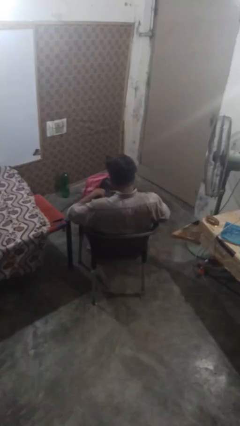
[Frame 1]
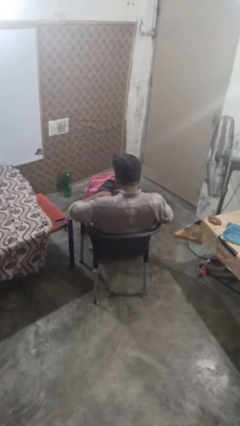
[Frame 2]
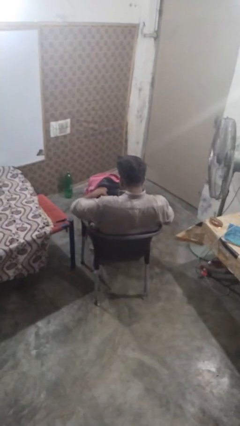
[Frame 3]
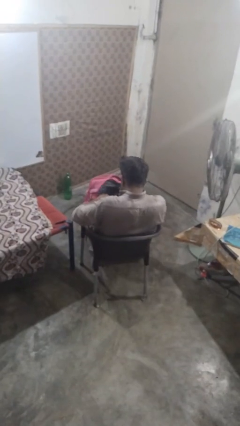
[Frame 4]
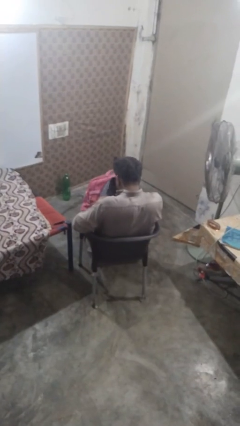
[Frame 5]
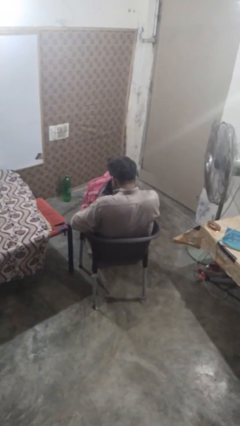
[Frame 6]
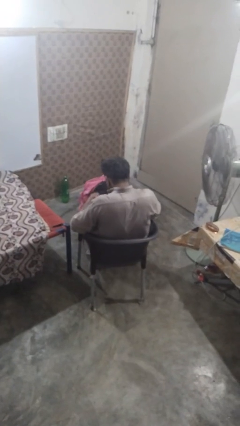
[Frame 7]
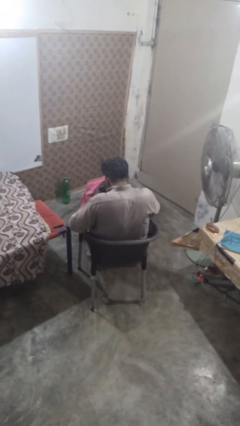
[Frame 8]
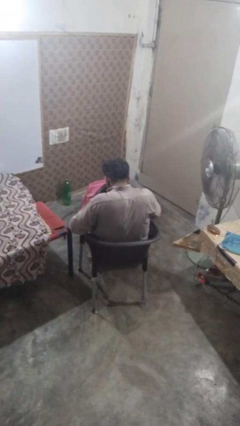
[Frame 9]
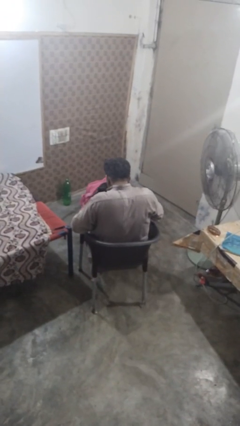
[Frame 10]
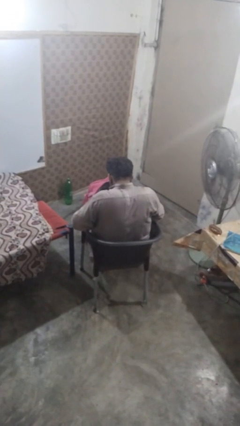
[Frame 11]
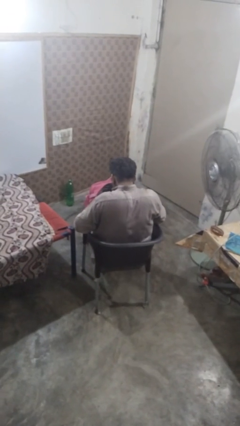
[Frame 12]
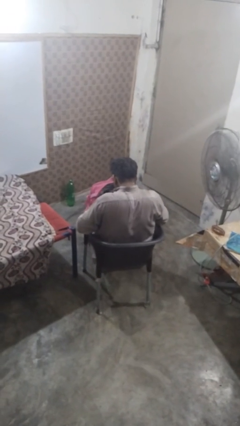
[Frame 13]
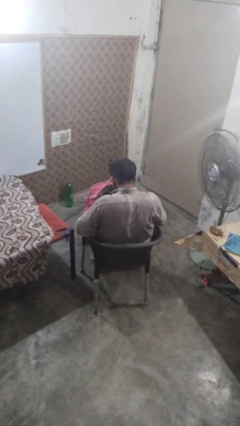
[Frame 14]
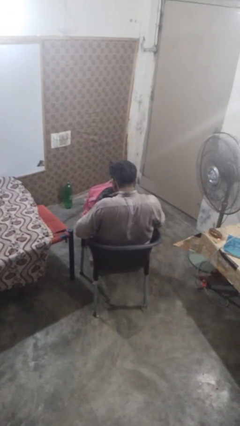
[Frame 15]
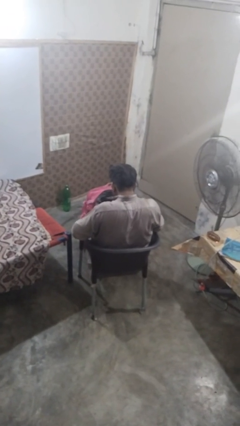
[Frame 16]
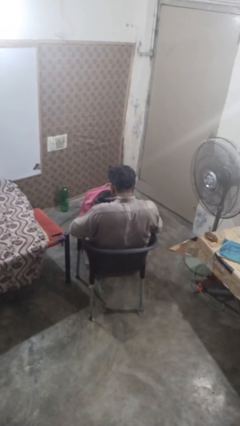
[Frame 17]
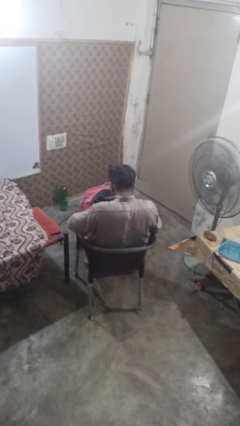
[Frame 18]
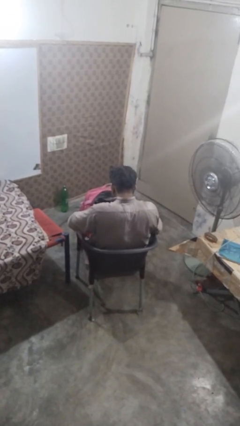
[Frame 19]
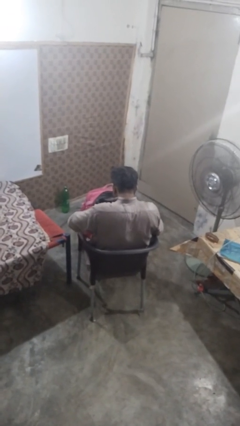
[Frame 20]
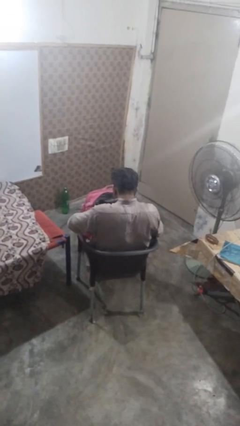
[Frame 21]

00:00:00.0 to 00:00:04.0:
person searches in backpack

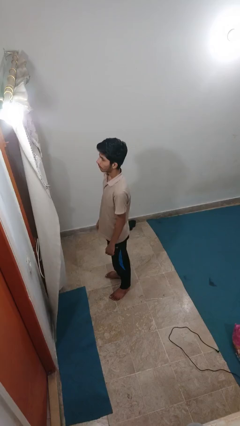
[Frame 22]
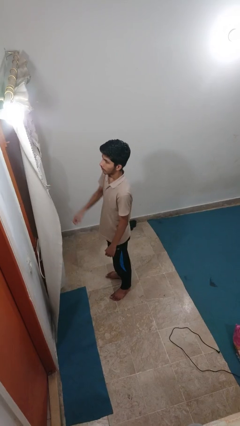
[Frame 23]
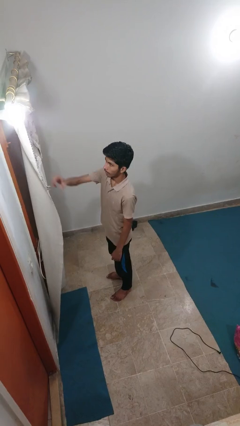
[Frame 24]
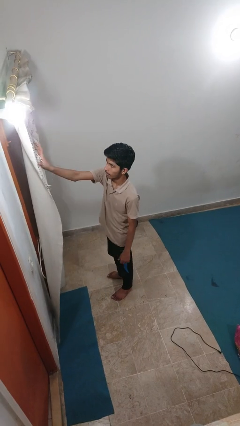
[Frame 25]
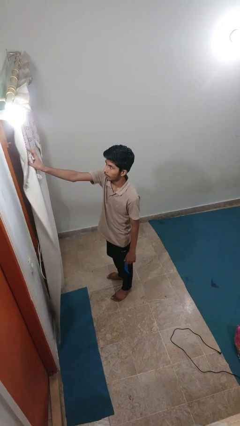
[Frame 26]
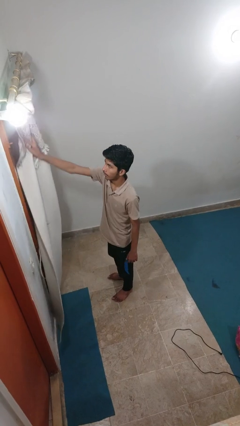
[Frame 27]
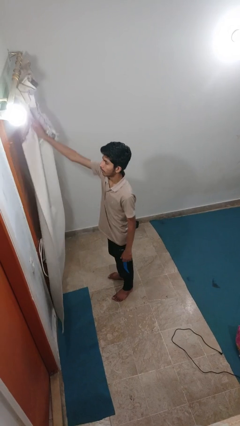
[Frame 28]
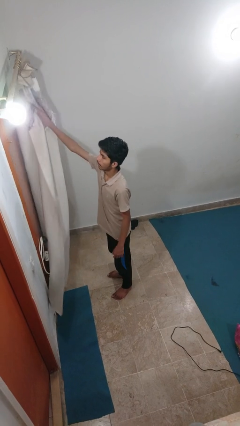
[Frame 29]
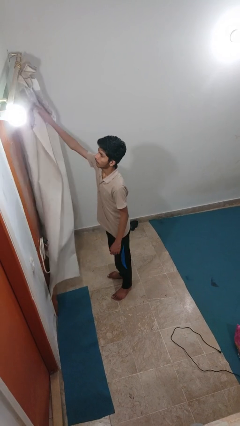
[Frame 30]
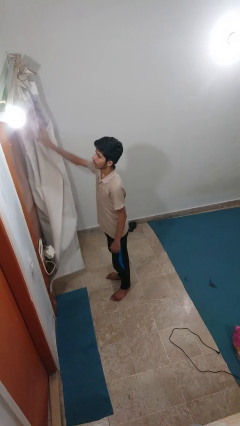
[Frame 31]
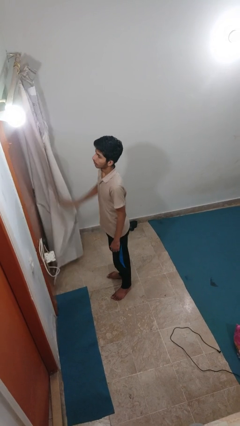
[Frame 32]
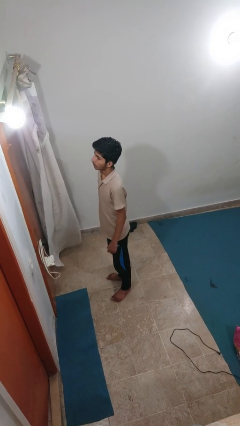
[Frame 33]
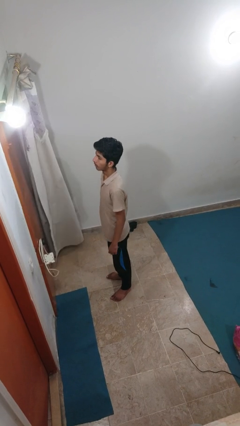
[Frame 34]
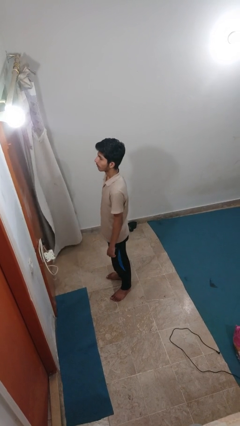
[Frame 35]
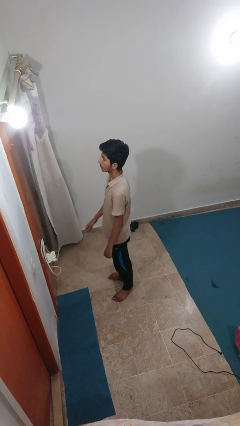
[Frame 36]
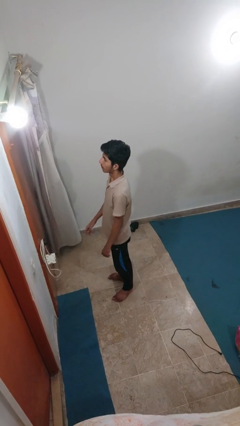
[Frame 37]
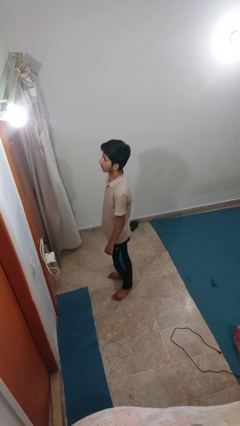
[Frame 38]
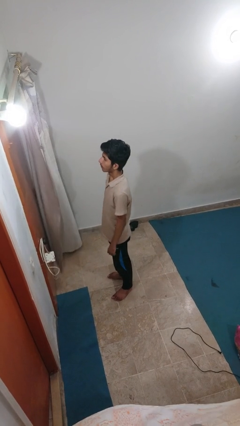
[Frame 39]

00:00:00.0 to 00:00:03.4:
person opens curtains

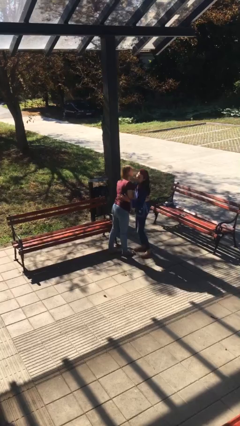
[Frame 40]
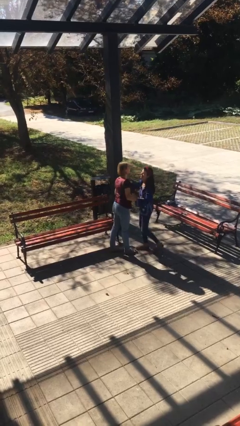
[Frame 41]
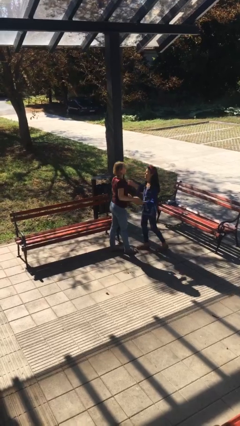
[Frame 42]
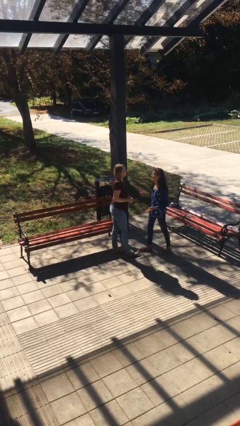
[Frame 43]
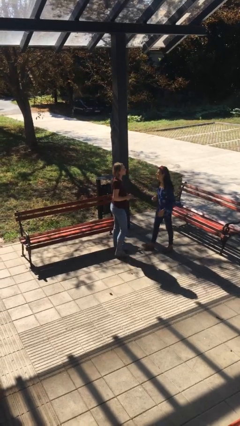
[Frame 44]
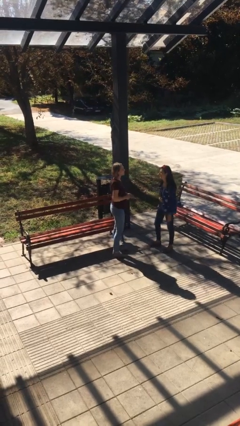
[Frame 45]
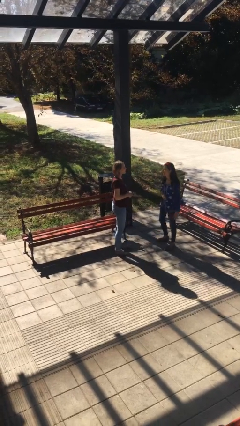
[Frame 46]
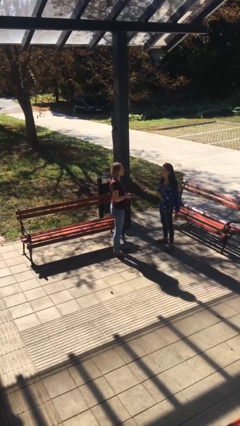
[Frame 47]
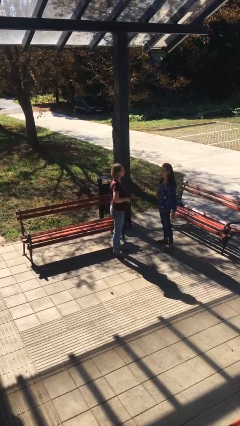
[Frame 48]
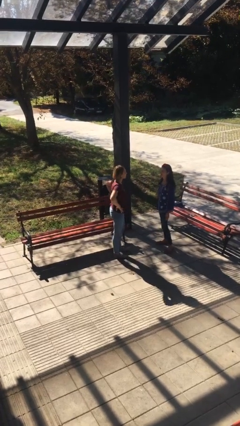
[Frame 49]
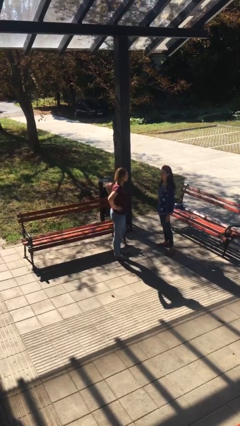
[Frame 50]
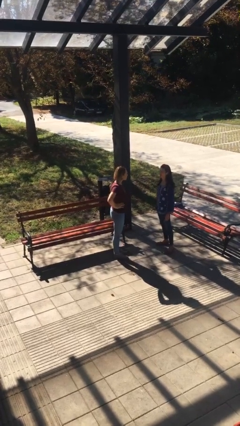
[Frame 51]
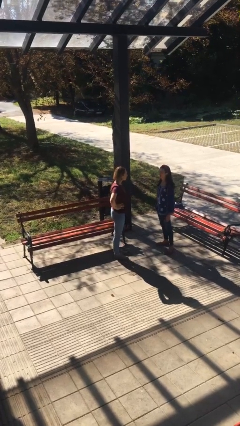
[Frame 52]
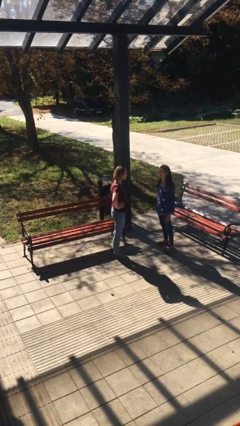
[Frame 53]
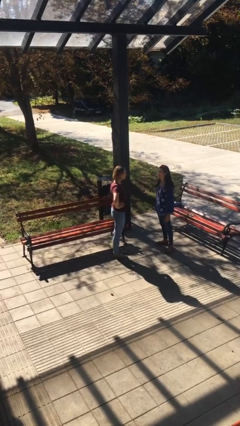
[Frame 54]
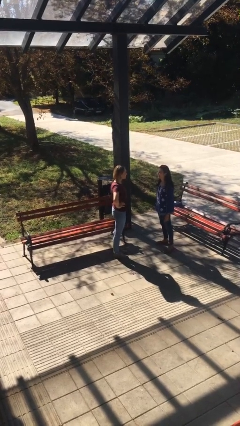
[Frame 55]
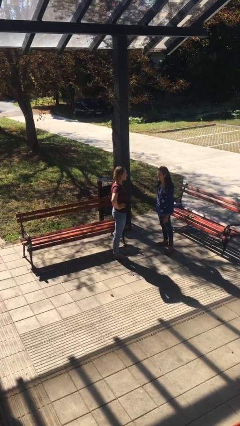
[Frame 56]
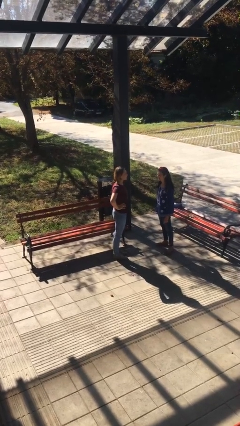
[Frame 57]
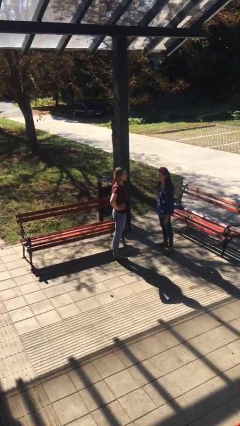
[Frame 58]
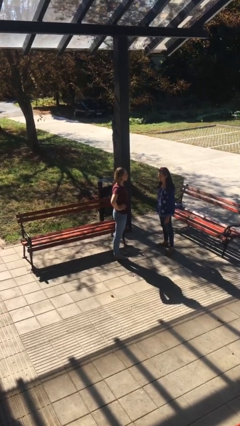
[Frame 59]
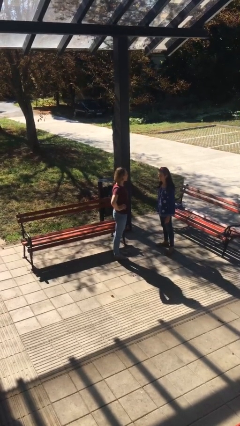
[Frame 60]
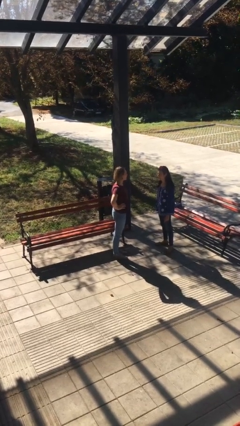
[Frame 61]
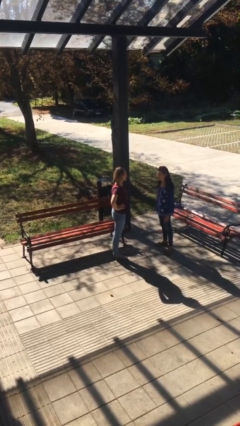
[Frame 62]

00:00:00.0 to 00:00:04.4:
person talks to person

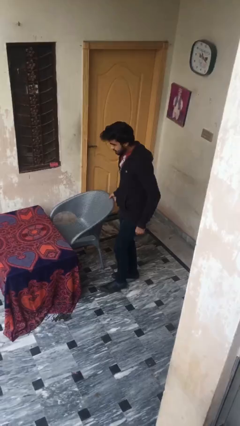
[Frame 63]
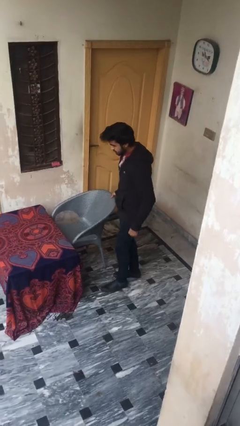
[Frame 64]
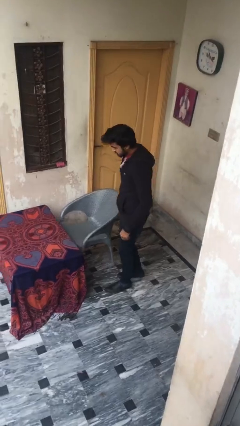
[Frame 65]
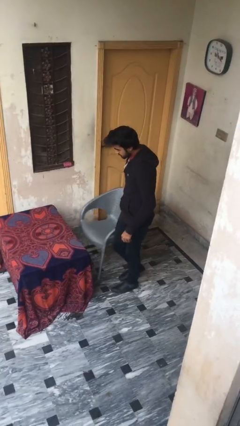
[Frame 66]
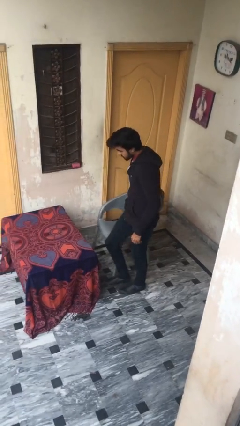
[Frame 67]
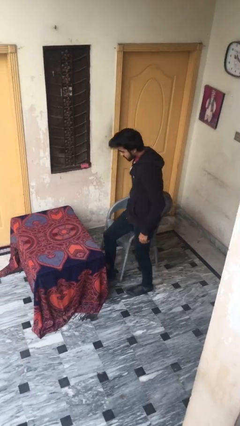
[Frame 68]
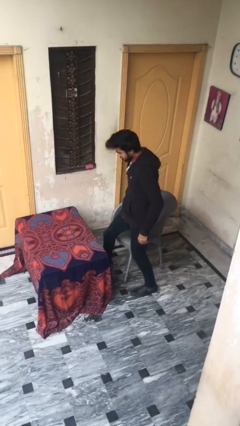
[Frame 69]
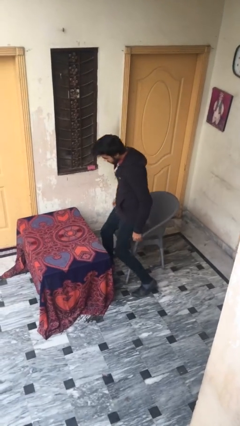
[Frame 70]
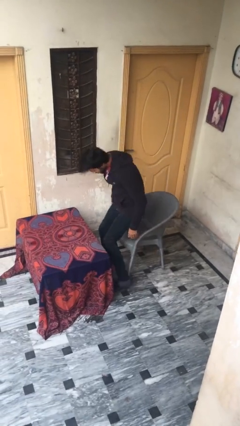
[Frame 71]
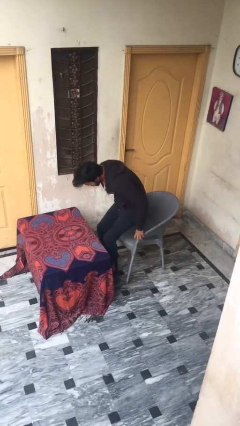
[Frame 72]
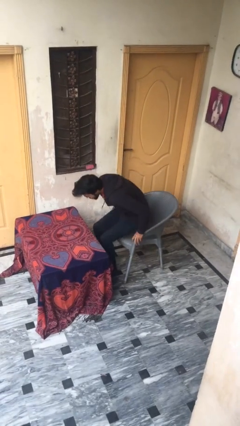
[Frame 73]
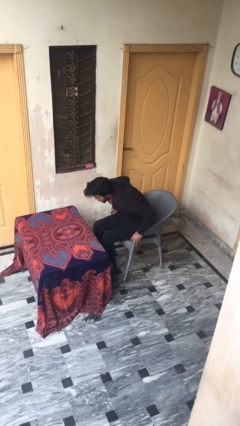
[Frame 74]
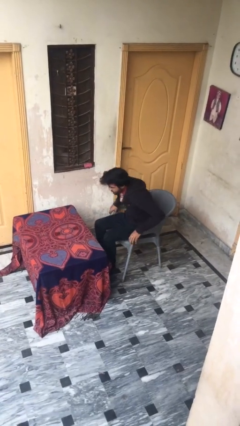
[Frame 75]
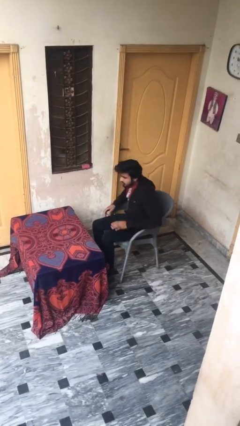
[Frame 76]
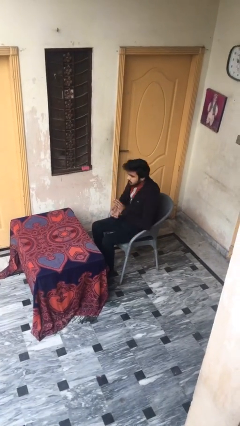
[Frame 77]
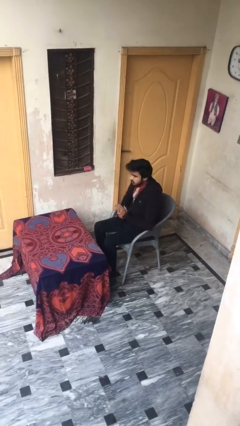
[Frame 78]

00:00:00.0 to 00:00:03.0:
person sits down

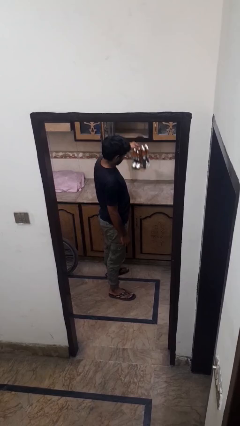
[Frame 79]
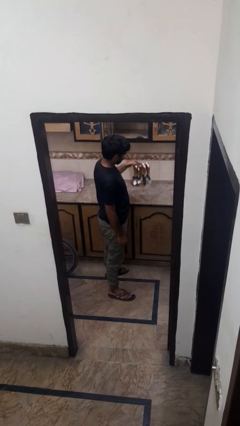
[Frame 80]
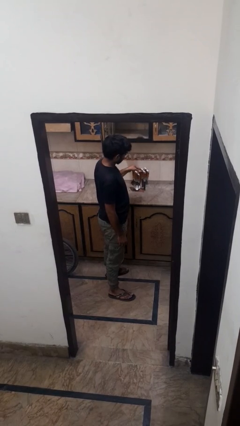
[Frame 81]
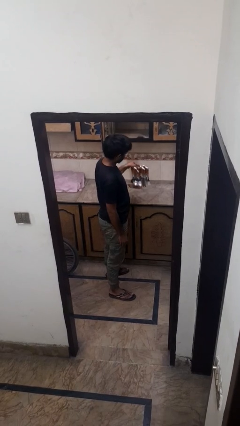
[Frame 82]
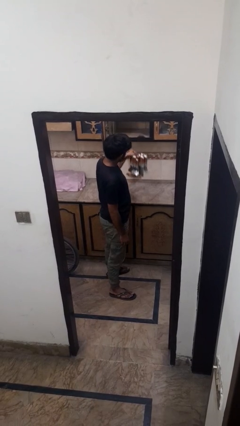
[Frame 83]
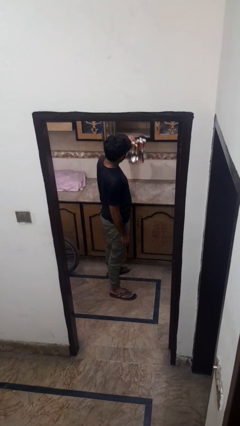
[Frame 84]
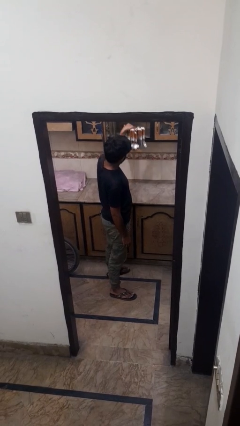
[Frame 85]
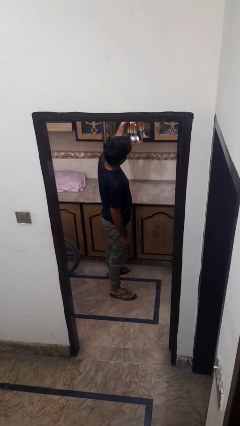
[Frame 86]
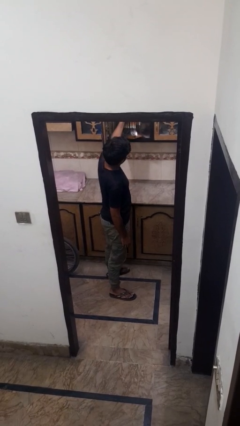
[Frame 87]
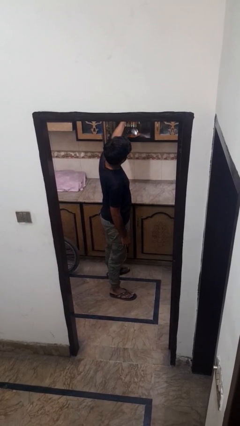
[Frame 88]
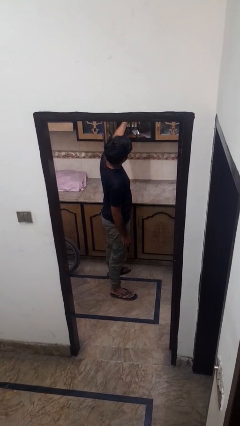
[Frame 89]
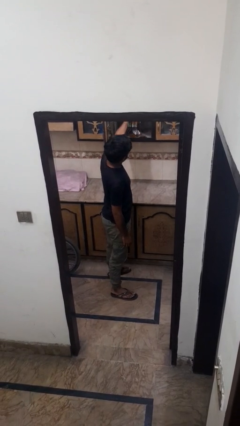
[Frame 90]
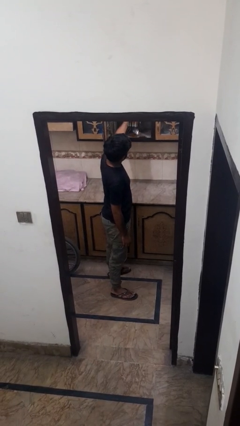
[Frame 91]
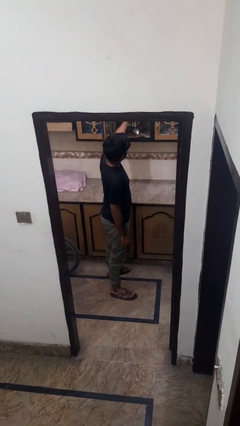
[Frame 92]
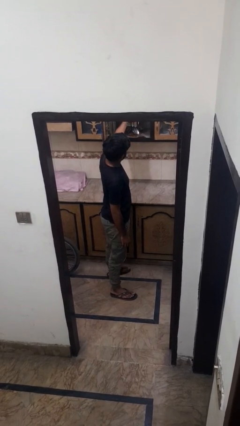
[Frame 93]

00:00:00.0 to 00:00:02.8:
person puts down object into cabinet
